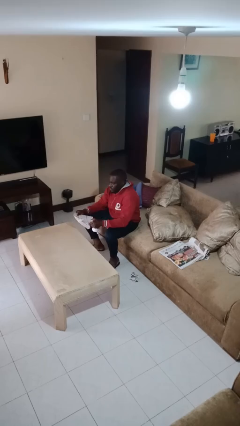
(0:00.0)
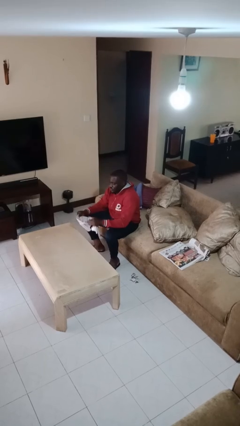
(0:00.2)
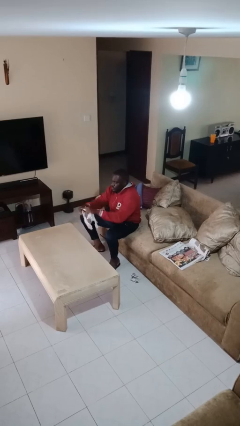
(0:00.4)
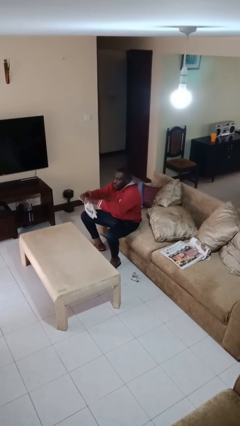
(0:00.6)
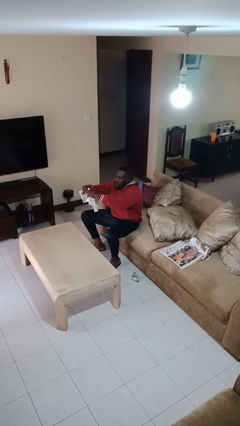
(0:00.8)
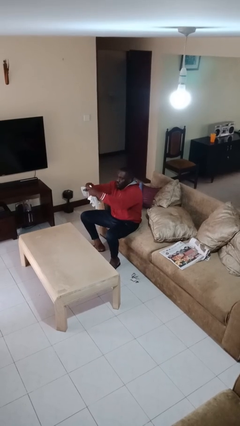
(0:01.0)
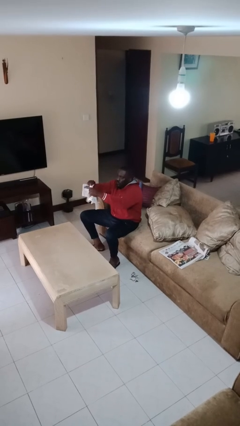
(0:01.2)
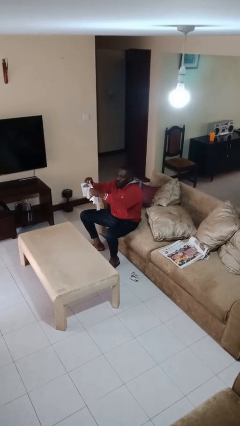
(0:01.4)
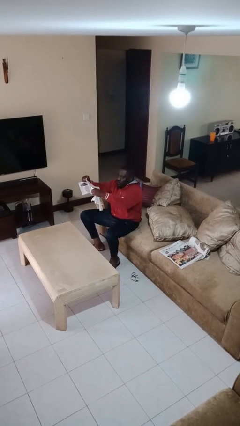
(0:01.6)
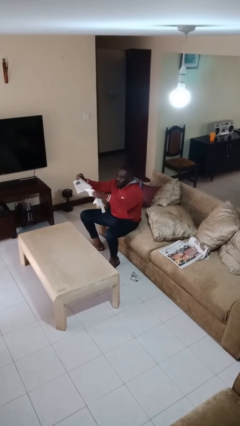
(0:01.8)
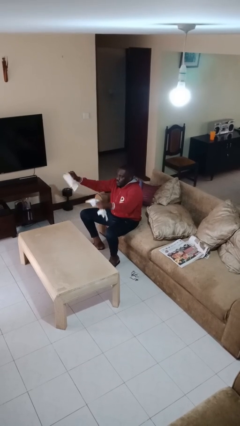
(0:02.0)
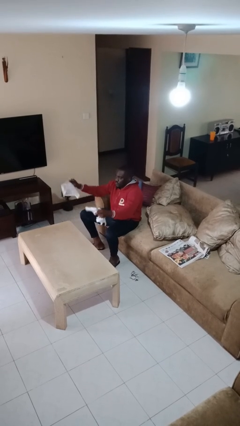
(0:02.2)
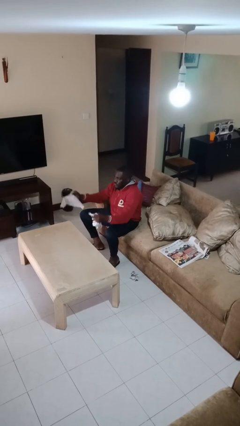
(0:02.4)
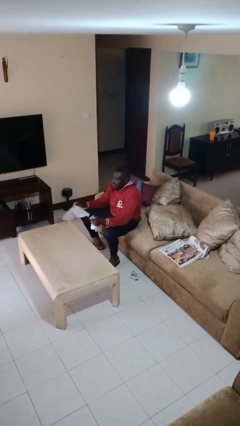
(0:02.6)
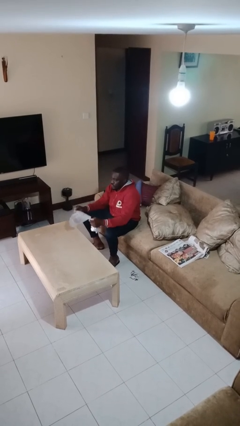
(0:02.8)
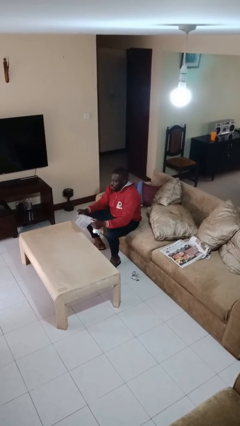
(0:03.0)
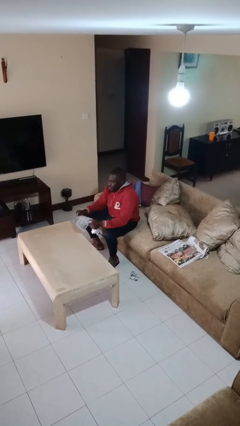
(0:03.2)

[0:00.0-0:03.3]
person tears paper

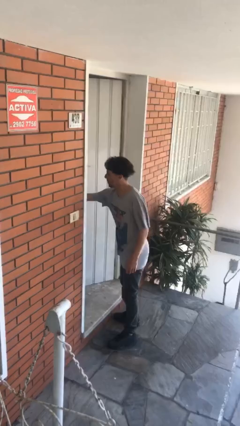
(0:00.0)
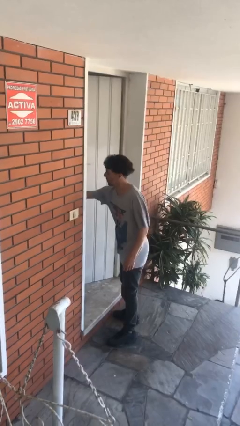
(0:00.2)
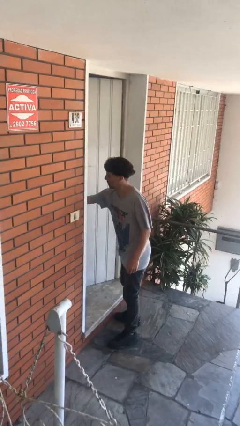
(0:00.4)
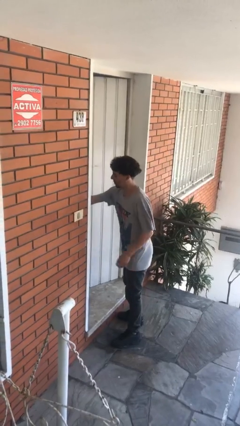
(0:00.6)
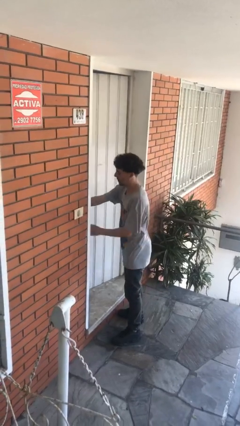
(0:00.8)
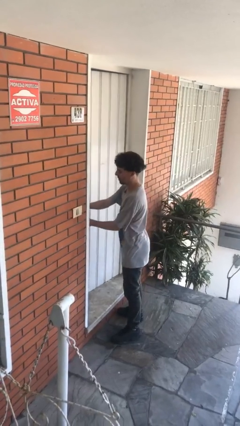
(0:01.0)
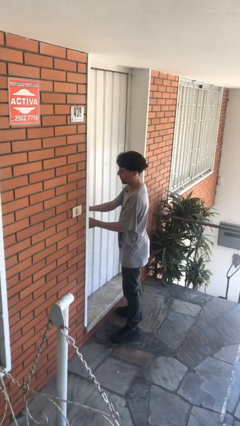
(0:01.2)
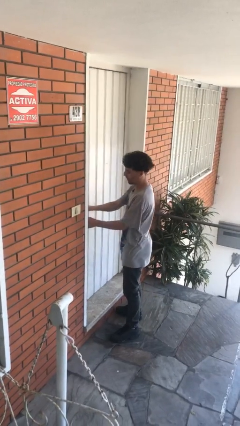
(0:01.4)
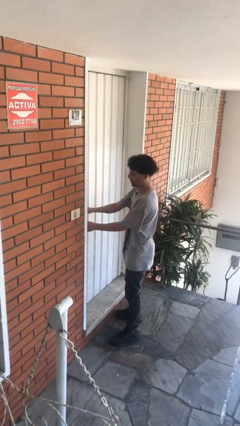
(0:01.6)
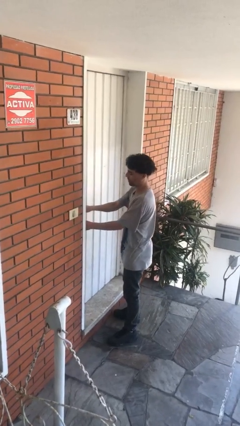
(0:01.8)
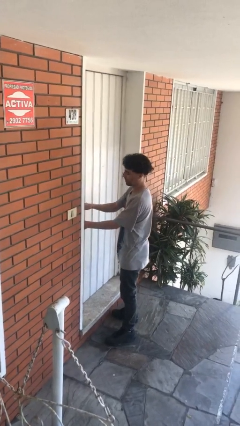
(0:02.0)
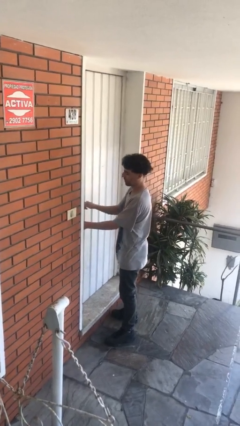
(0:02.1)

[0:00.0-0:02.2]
person closes facility door

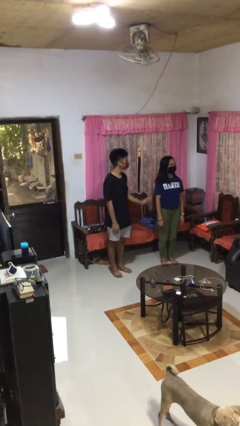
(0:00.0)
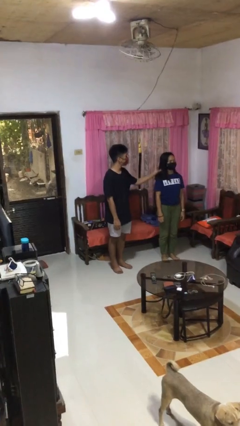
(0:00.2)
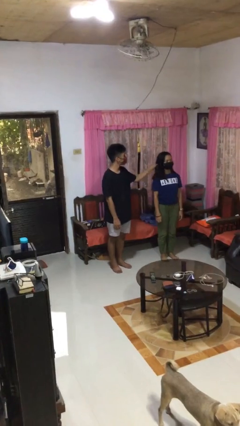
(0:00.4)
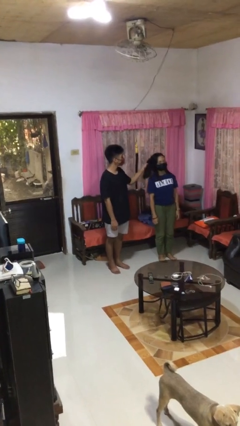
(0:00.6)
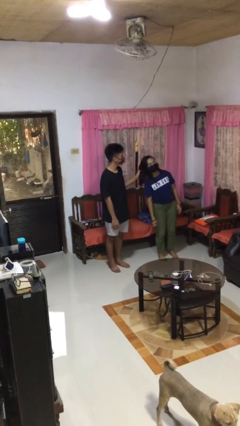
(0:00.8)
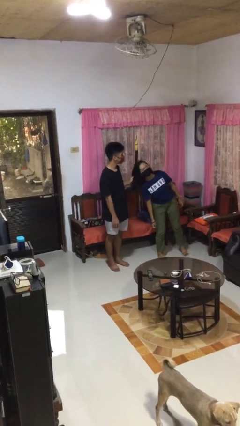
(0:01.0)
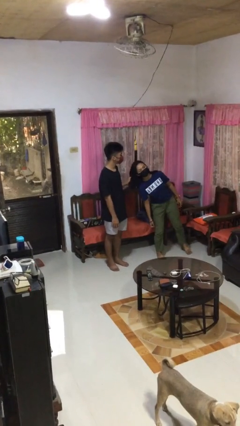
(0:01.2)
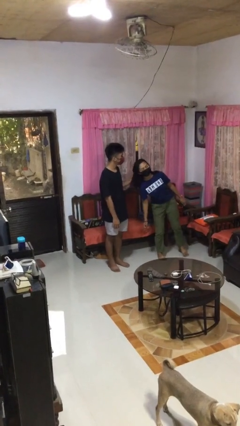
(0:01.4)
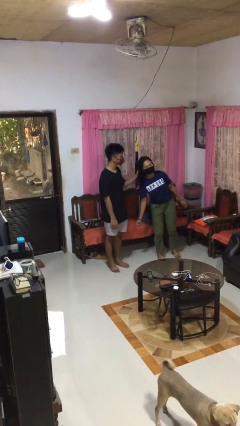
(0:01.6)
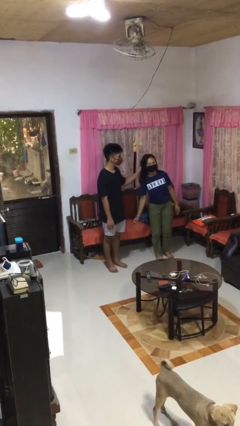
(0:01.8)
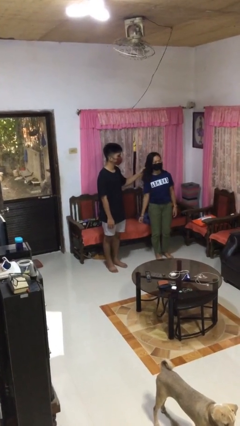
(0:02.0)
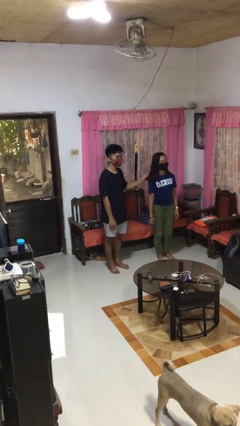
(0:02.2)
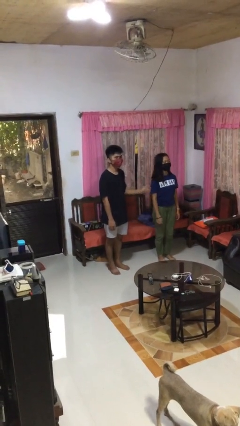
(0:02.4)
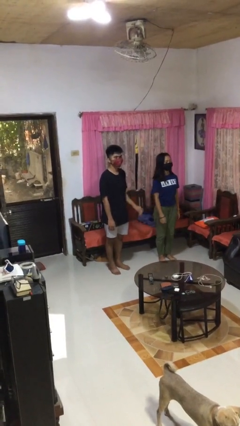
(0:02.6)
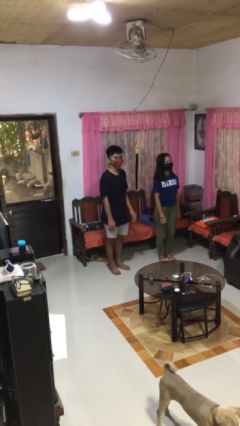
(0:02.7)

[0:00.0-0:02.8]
person grabs person by hair

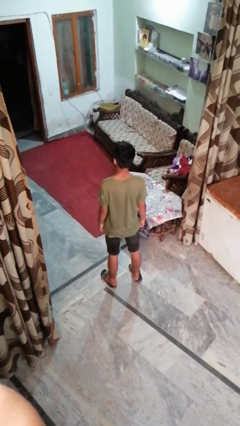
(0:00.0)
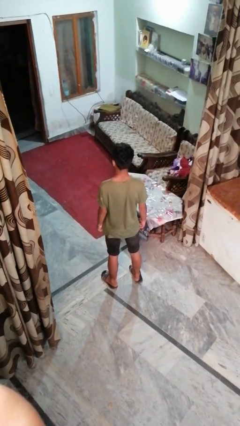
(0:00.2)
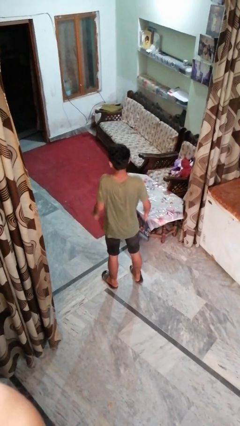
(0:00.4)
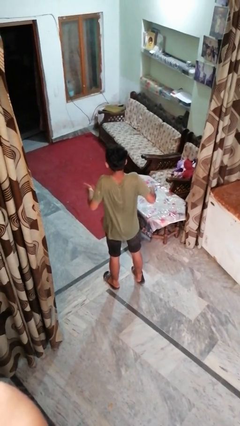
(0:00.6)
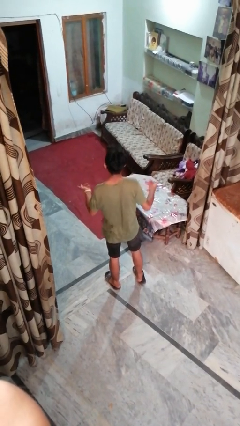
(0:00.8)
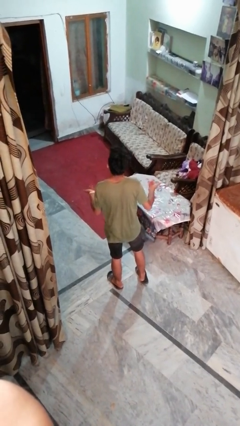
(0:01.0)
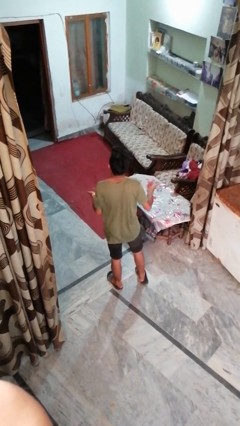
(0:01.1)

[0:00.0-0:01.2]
person shrugs

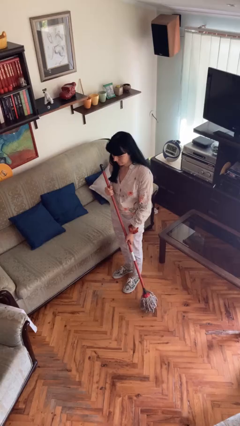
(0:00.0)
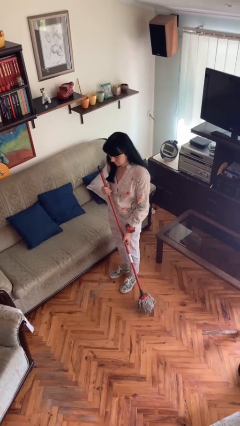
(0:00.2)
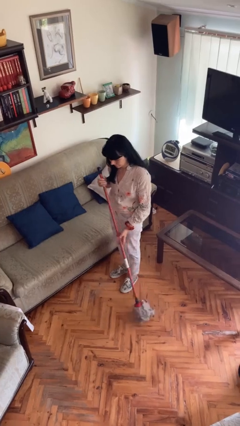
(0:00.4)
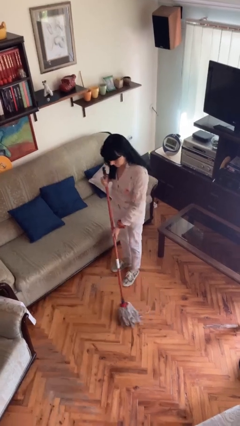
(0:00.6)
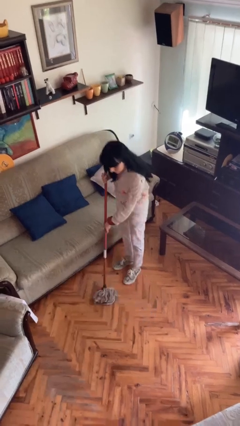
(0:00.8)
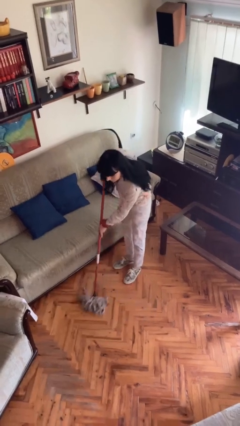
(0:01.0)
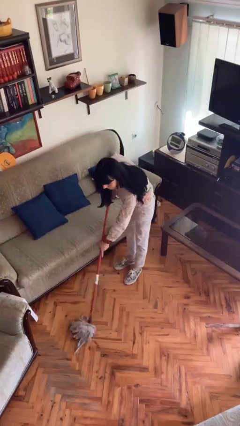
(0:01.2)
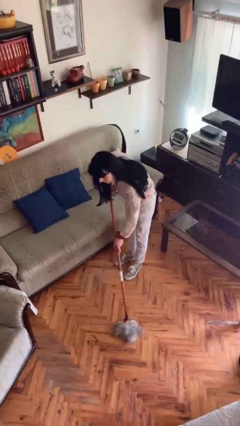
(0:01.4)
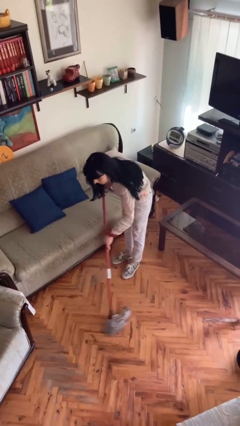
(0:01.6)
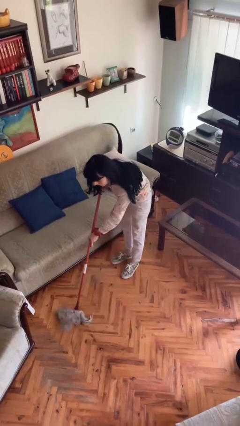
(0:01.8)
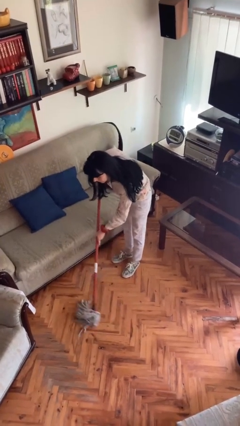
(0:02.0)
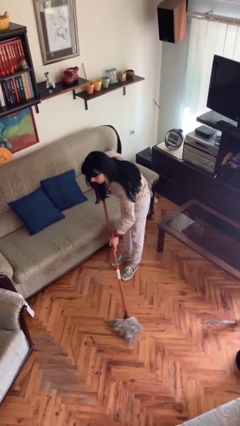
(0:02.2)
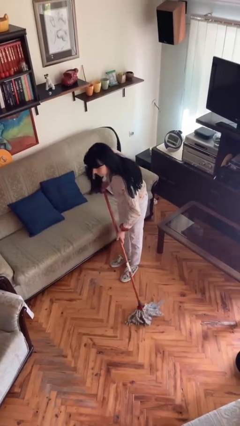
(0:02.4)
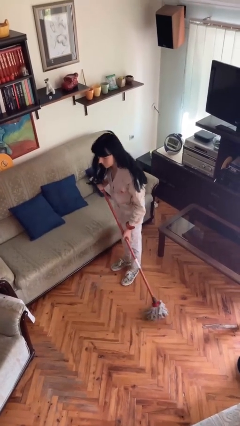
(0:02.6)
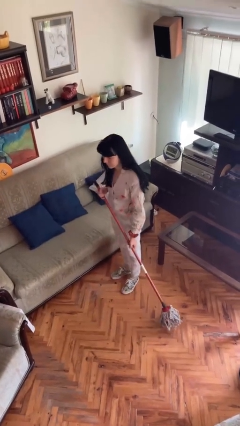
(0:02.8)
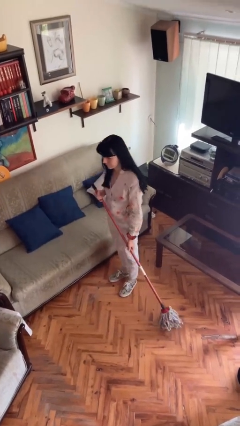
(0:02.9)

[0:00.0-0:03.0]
person sweeps floor

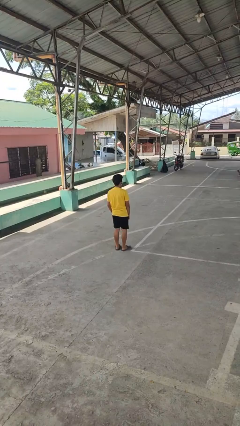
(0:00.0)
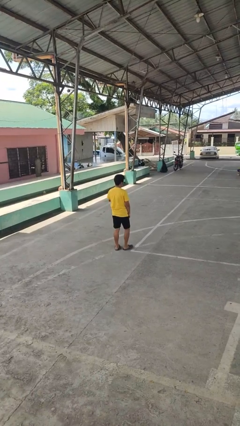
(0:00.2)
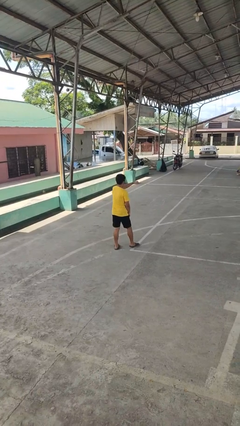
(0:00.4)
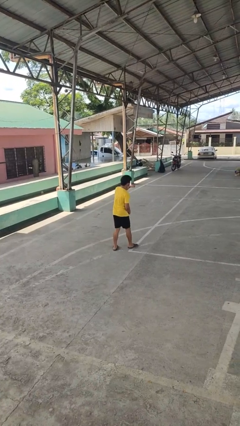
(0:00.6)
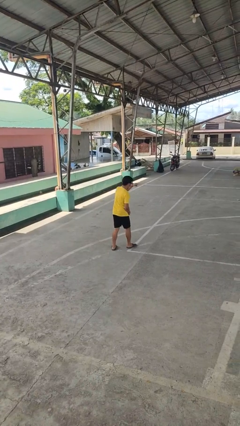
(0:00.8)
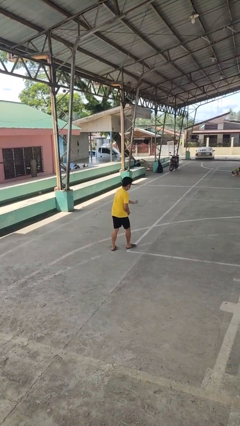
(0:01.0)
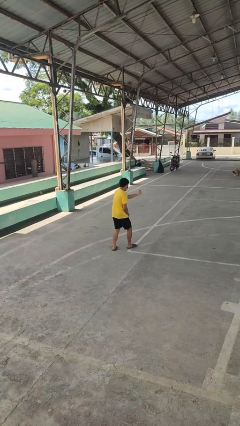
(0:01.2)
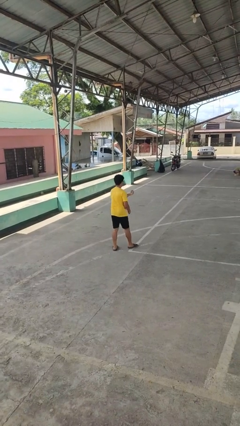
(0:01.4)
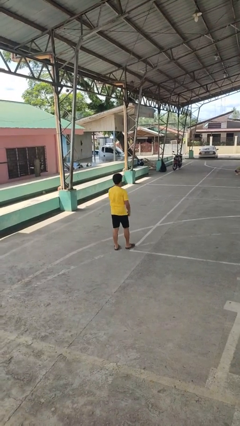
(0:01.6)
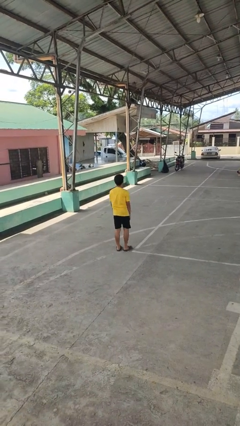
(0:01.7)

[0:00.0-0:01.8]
person punches

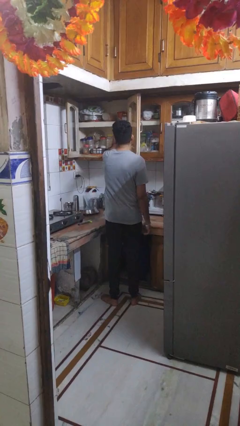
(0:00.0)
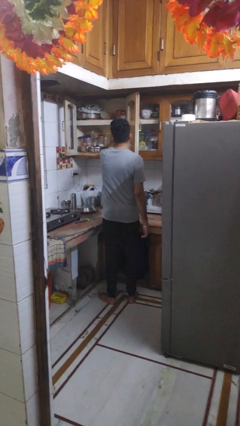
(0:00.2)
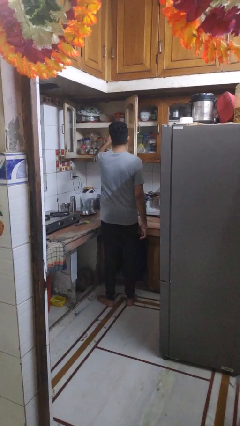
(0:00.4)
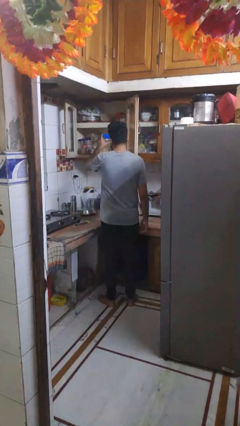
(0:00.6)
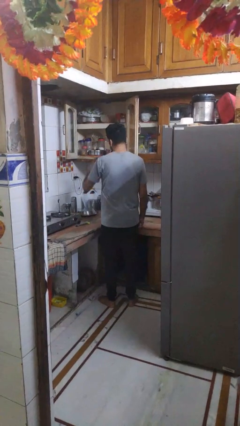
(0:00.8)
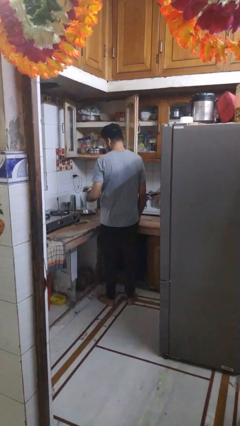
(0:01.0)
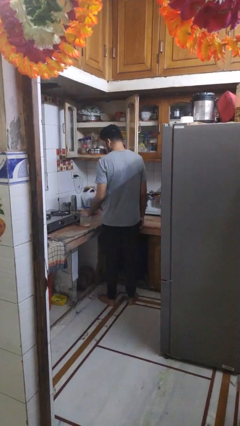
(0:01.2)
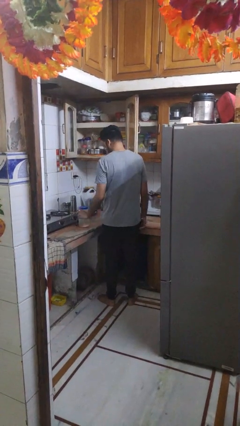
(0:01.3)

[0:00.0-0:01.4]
person takes object from cabinet

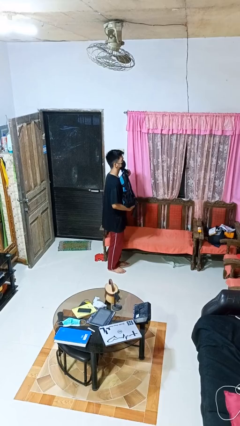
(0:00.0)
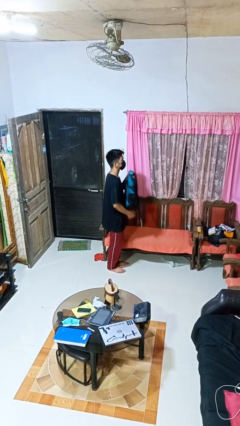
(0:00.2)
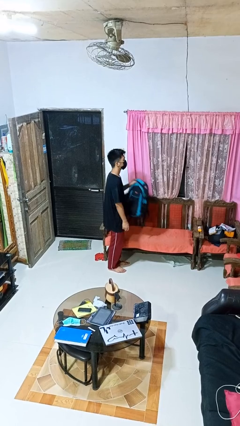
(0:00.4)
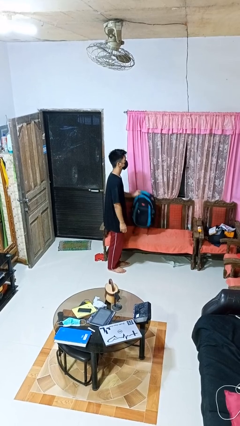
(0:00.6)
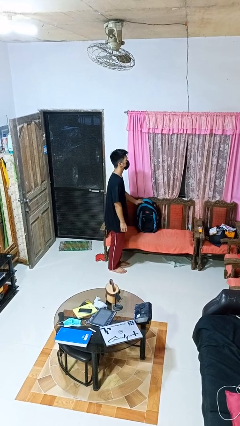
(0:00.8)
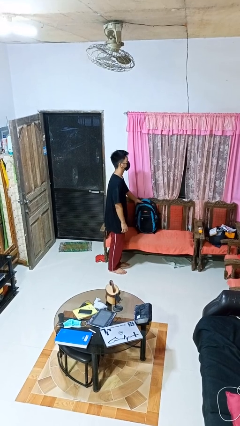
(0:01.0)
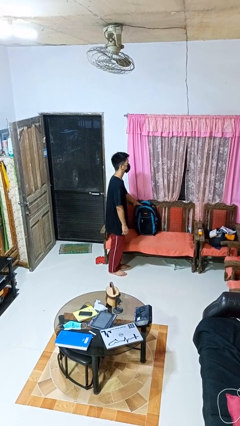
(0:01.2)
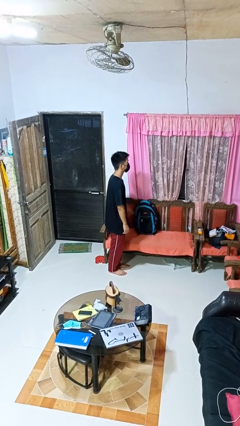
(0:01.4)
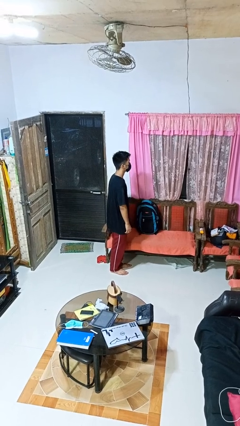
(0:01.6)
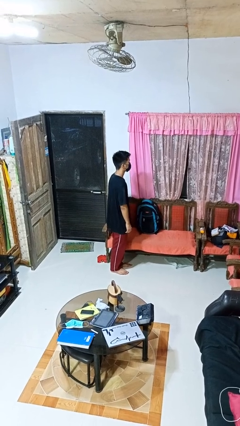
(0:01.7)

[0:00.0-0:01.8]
person puts down object on couch
